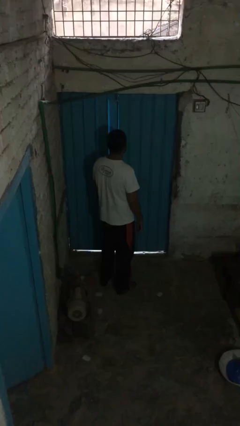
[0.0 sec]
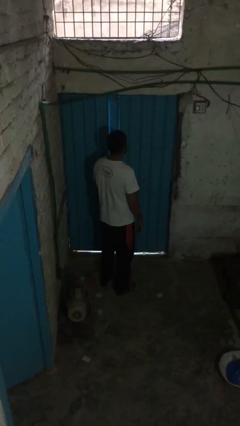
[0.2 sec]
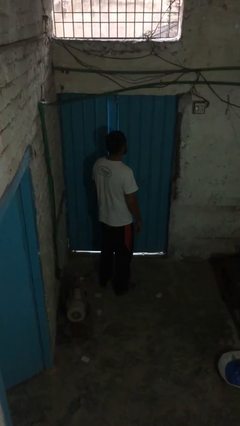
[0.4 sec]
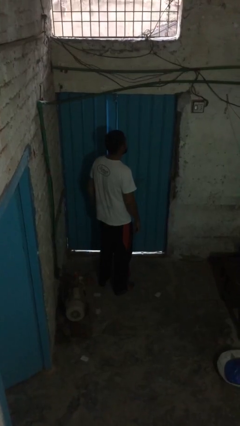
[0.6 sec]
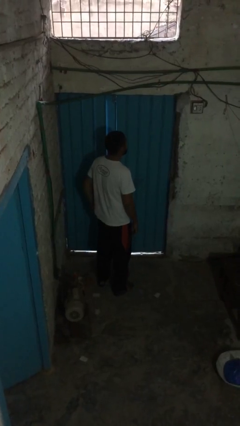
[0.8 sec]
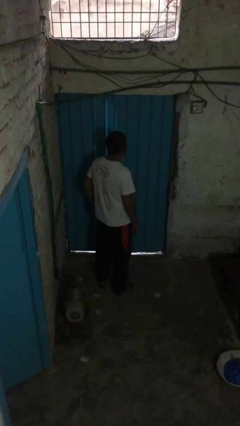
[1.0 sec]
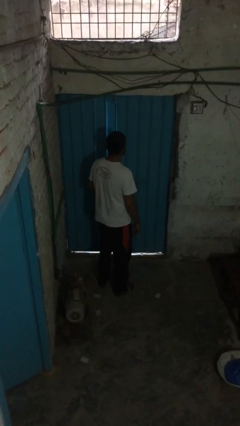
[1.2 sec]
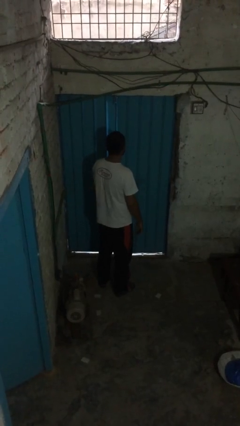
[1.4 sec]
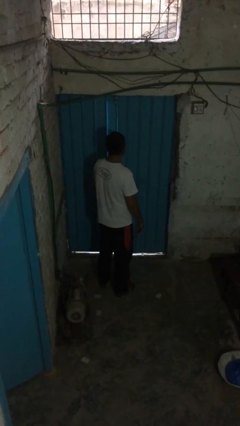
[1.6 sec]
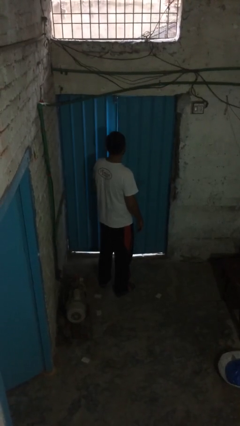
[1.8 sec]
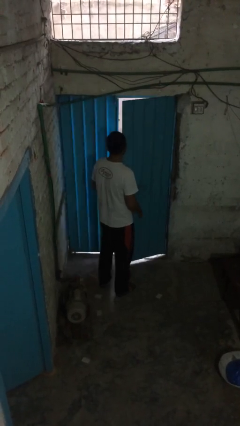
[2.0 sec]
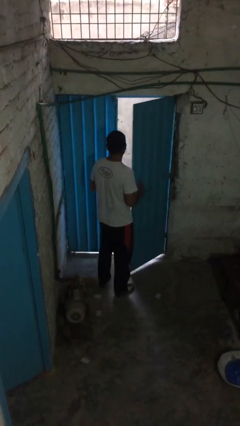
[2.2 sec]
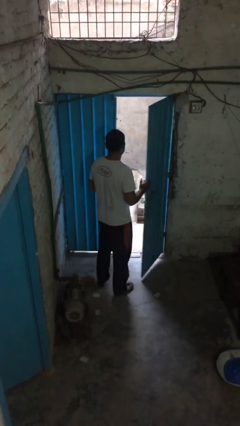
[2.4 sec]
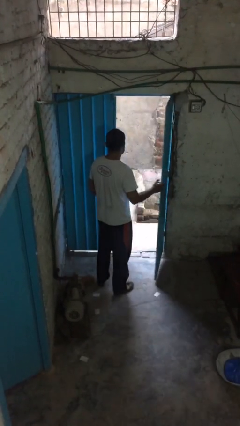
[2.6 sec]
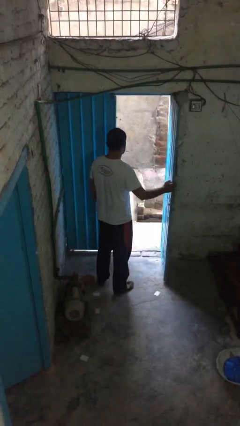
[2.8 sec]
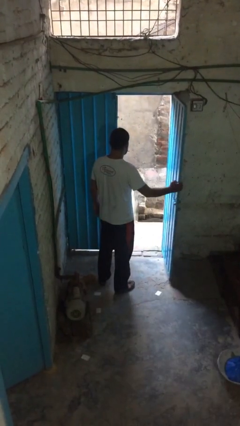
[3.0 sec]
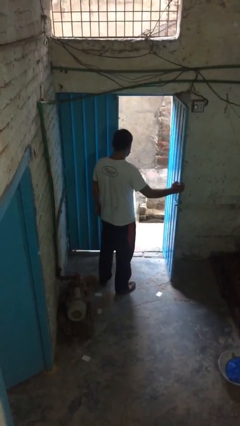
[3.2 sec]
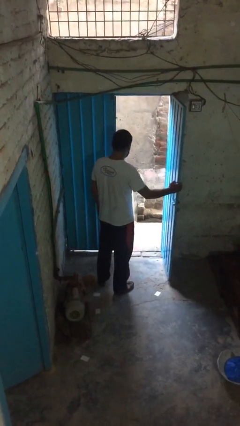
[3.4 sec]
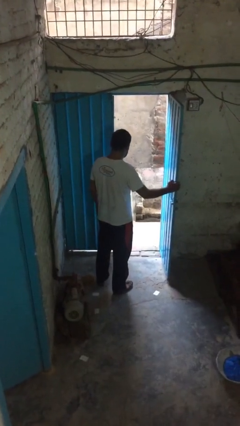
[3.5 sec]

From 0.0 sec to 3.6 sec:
person opens facility door

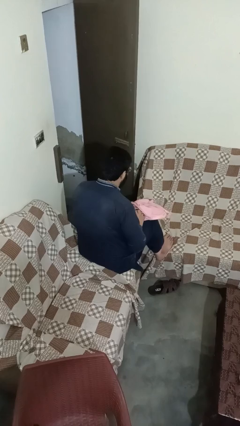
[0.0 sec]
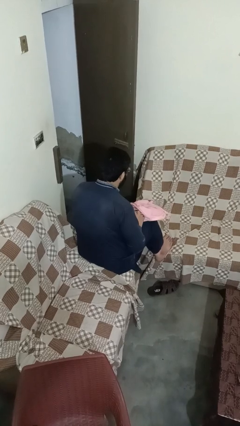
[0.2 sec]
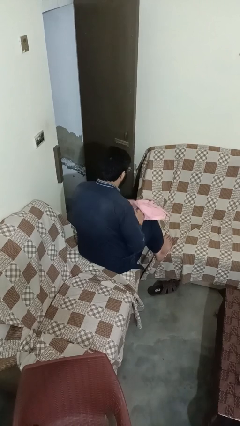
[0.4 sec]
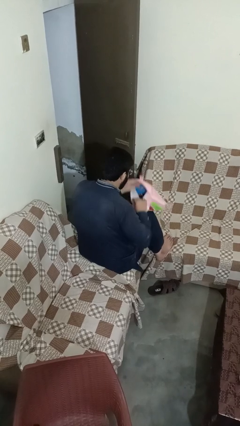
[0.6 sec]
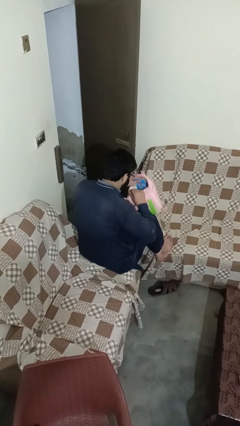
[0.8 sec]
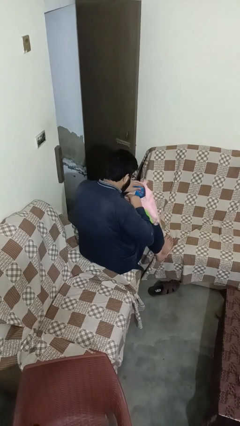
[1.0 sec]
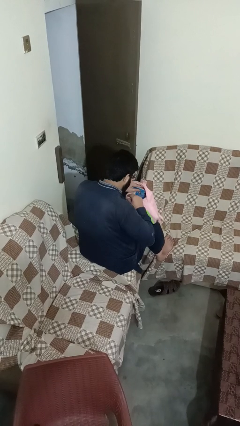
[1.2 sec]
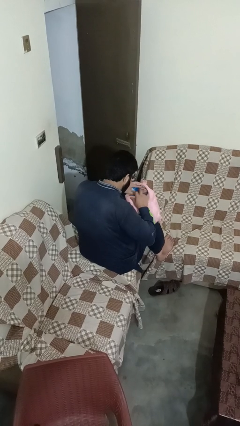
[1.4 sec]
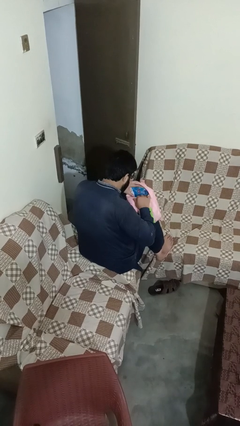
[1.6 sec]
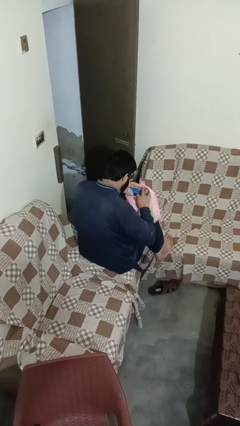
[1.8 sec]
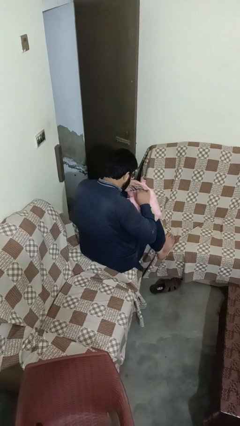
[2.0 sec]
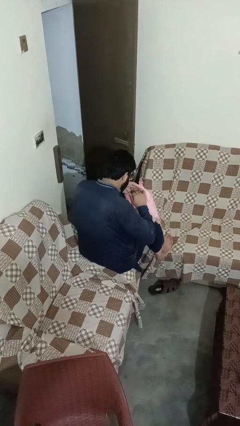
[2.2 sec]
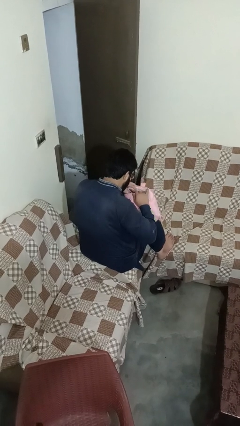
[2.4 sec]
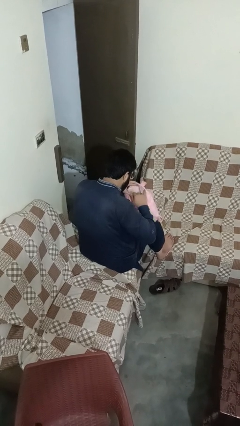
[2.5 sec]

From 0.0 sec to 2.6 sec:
person searches in bag

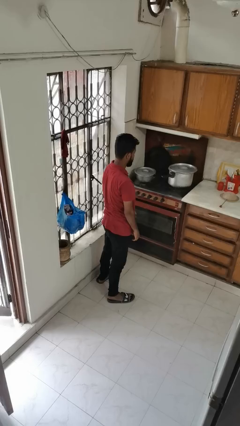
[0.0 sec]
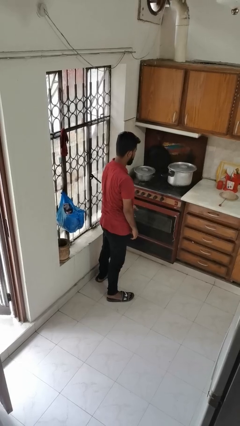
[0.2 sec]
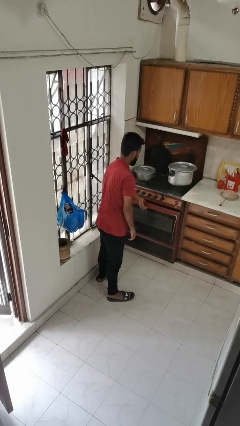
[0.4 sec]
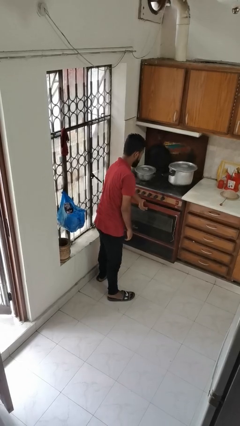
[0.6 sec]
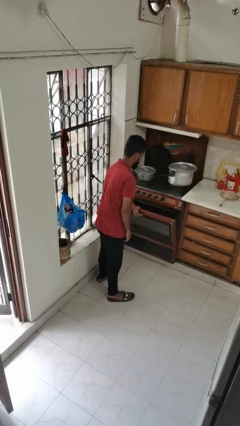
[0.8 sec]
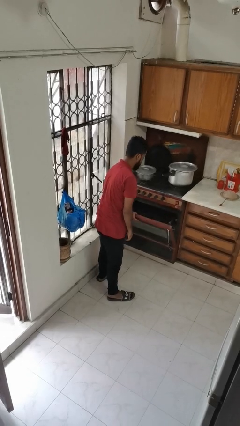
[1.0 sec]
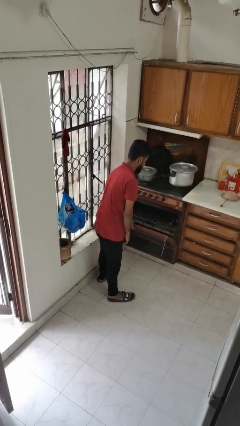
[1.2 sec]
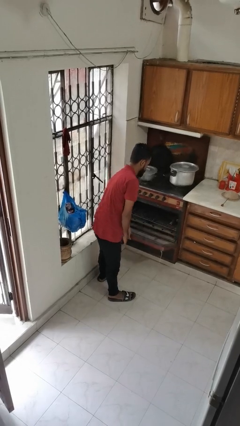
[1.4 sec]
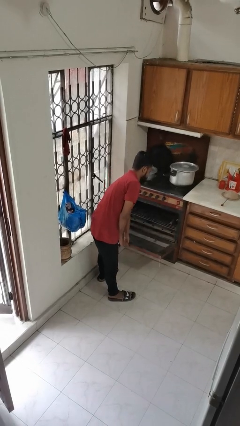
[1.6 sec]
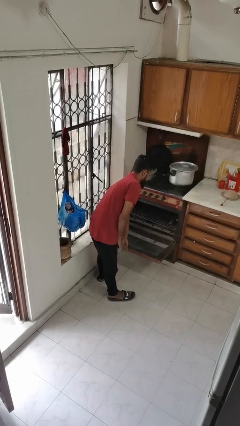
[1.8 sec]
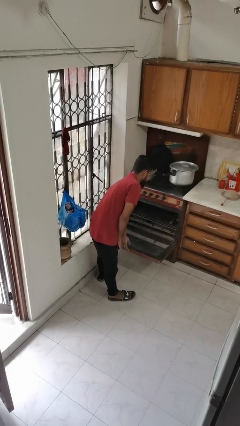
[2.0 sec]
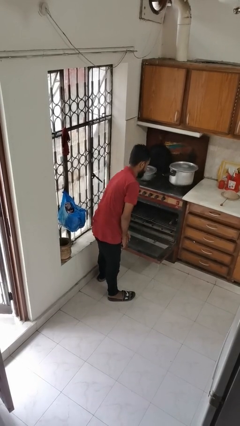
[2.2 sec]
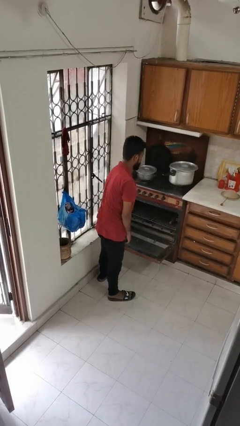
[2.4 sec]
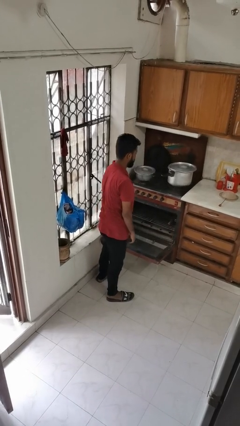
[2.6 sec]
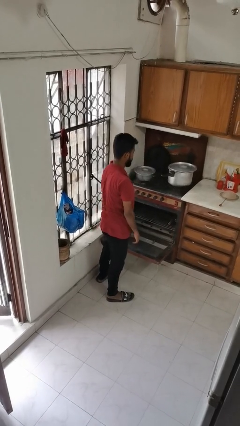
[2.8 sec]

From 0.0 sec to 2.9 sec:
person opens oven door

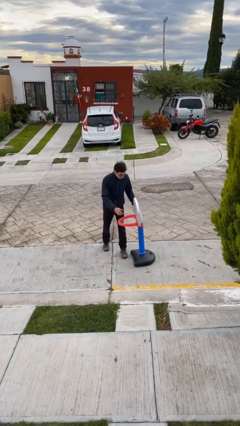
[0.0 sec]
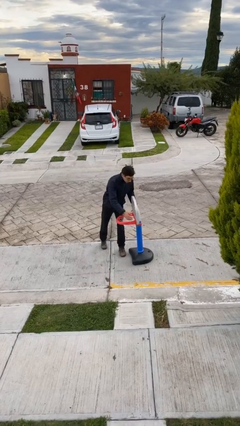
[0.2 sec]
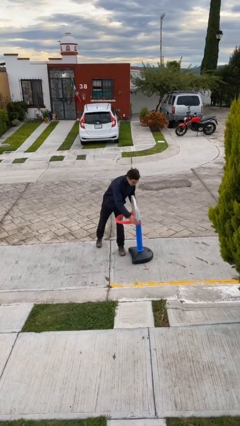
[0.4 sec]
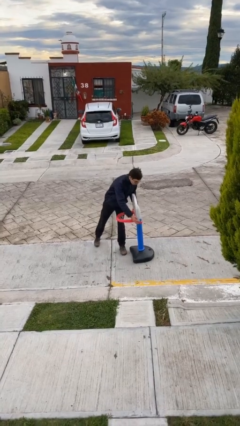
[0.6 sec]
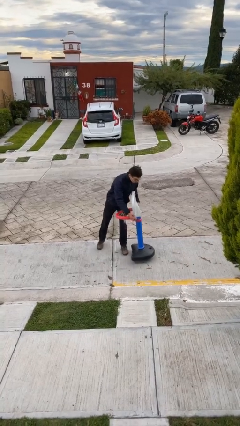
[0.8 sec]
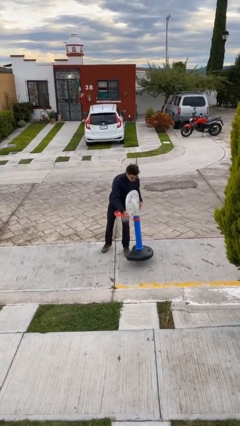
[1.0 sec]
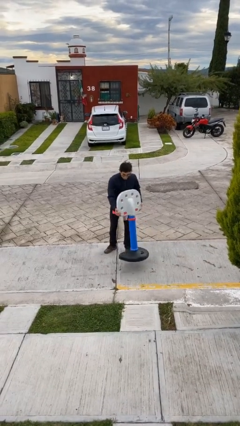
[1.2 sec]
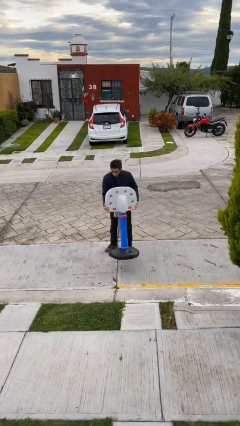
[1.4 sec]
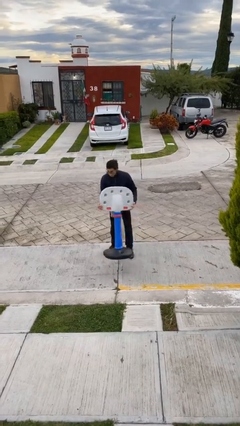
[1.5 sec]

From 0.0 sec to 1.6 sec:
person picks up object from floor

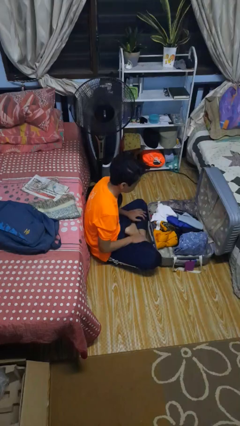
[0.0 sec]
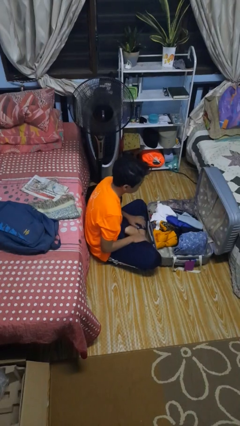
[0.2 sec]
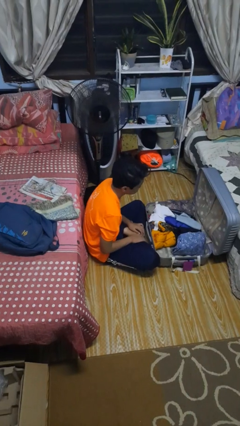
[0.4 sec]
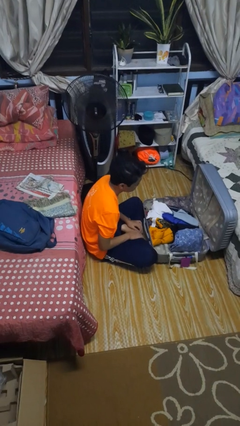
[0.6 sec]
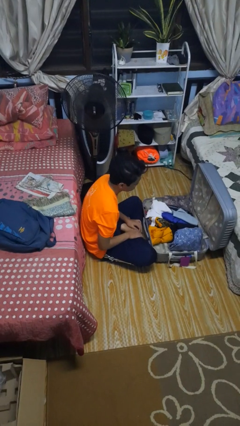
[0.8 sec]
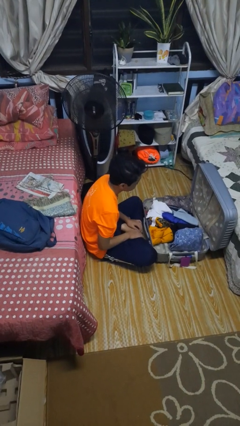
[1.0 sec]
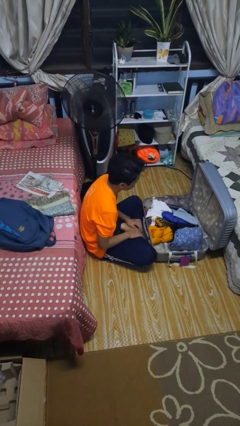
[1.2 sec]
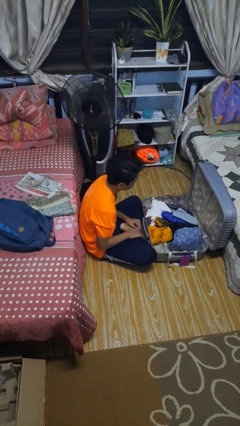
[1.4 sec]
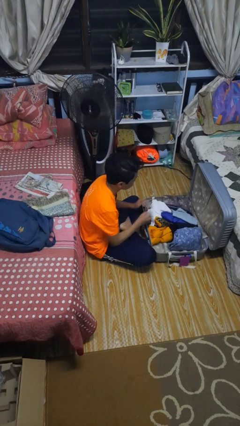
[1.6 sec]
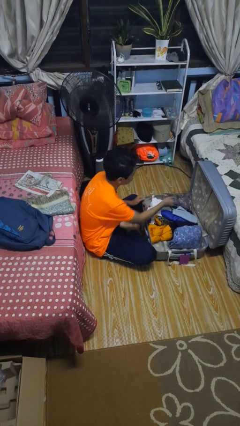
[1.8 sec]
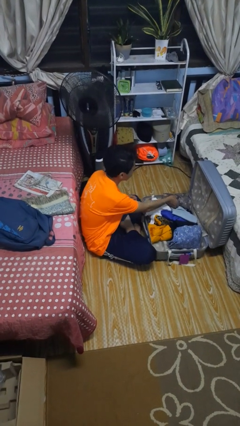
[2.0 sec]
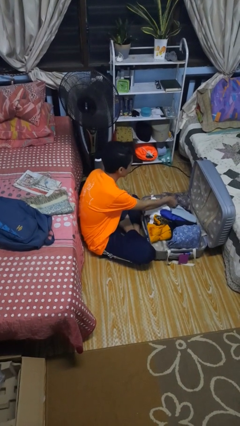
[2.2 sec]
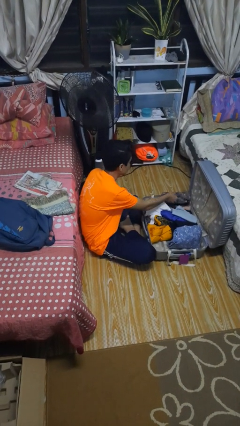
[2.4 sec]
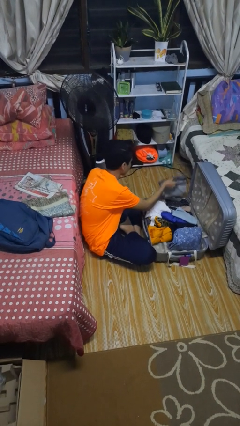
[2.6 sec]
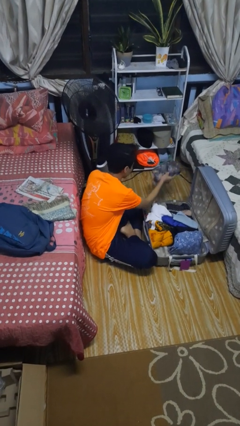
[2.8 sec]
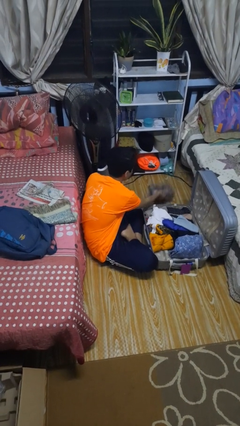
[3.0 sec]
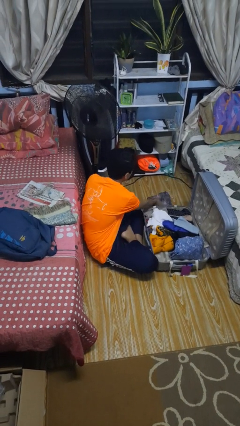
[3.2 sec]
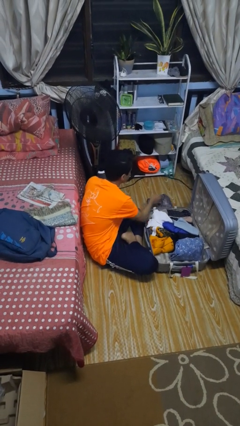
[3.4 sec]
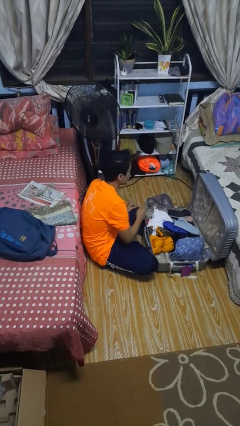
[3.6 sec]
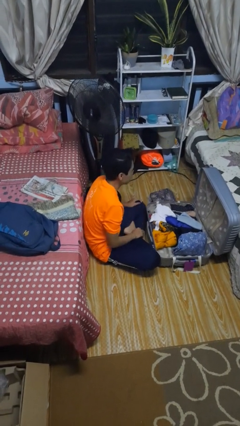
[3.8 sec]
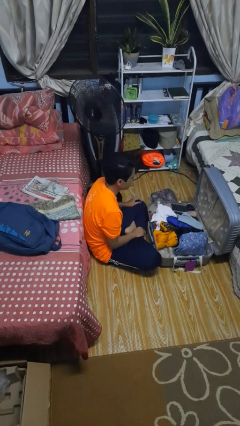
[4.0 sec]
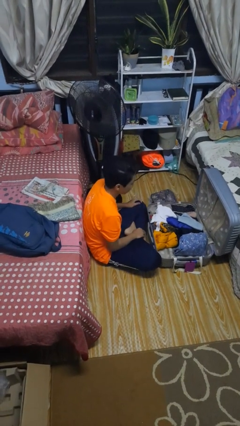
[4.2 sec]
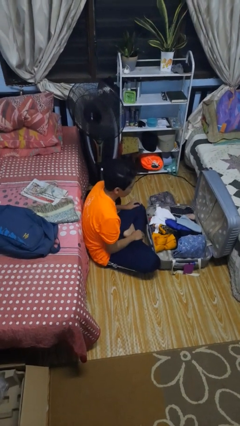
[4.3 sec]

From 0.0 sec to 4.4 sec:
person unloads clothes from suitcase

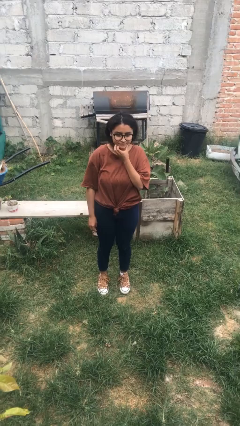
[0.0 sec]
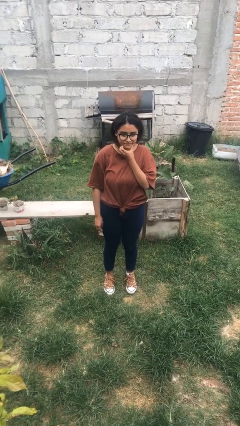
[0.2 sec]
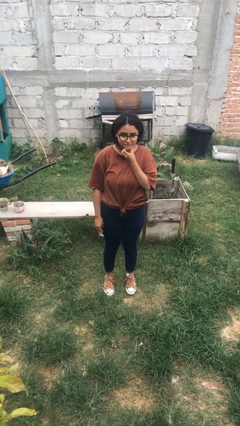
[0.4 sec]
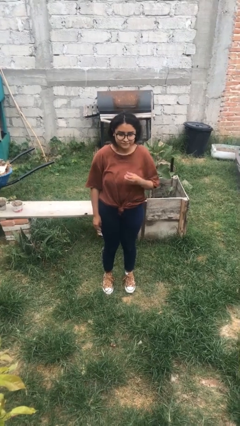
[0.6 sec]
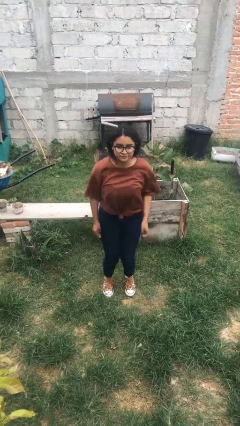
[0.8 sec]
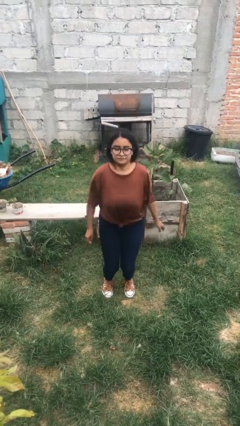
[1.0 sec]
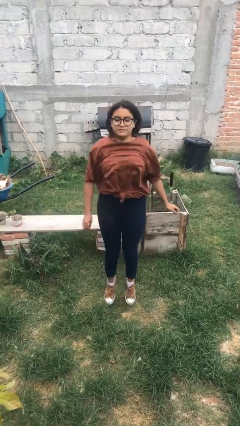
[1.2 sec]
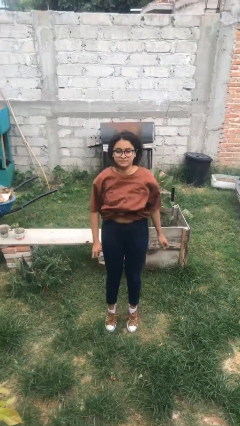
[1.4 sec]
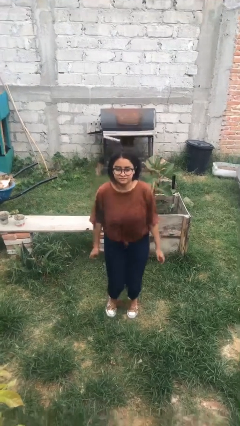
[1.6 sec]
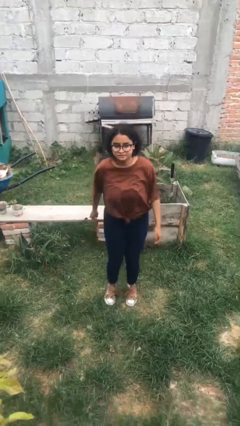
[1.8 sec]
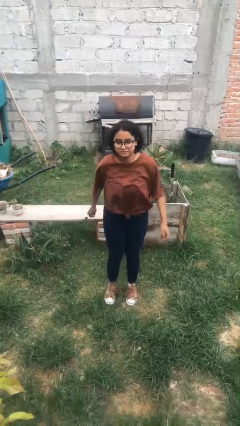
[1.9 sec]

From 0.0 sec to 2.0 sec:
person jumps

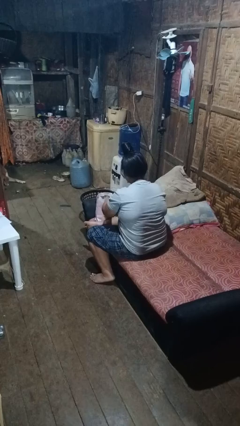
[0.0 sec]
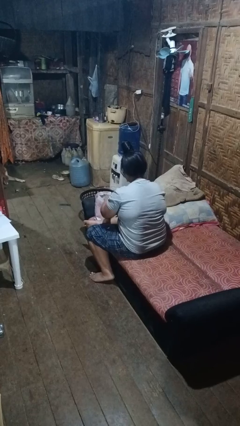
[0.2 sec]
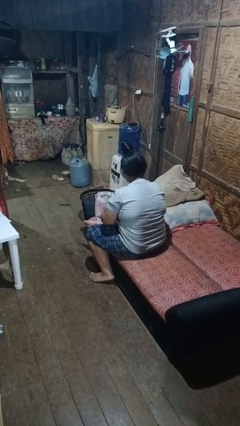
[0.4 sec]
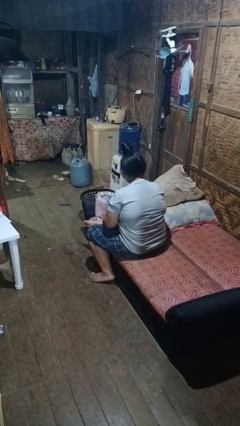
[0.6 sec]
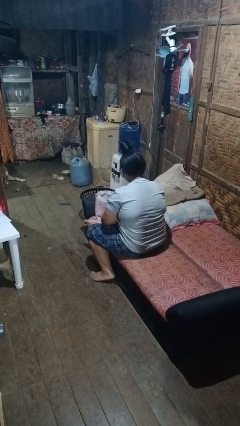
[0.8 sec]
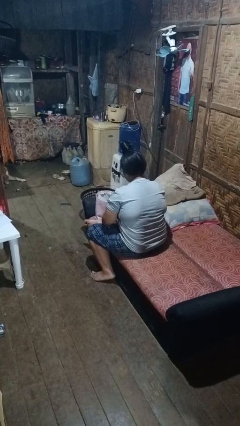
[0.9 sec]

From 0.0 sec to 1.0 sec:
person puts object into bag
